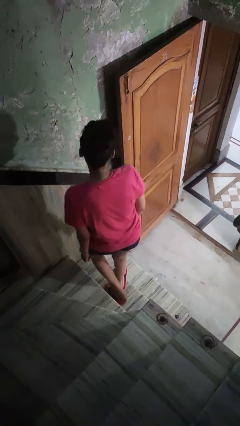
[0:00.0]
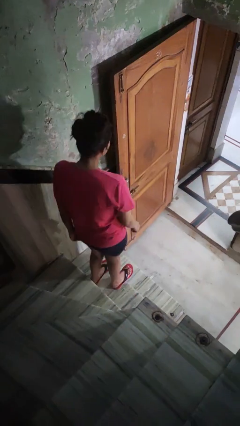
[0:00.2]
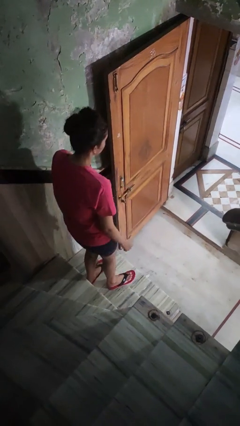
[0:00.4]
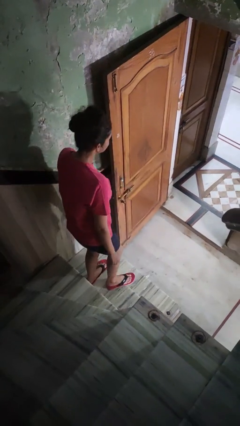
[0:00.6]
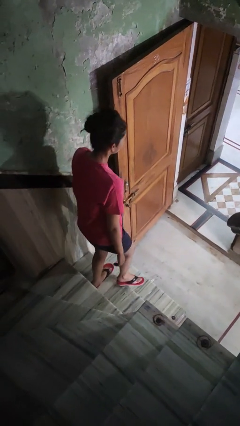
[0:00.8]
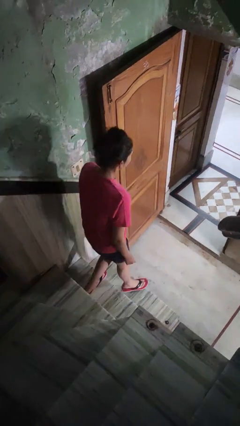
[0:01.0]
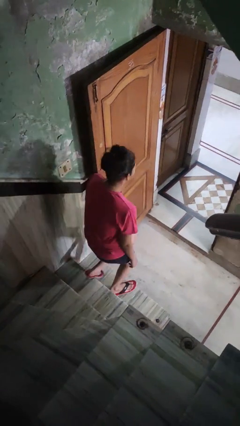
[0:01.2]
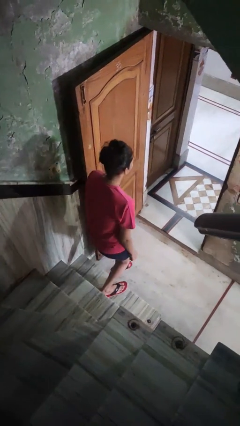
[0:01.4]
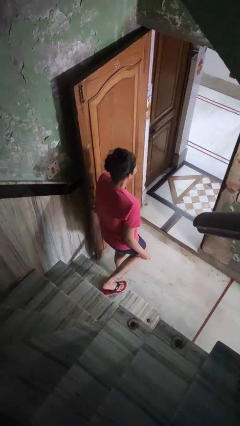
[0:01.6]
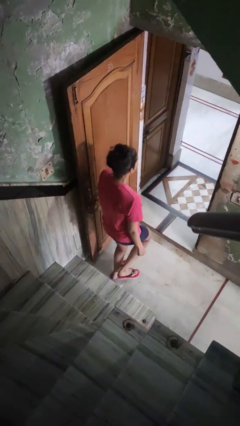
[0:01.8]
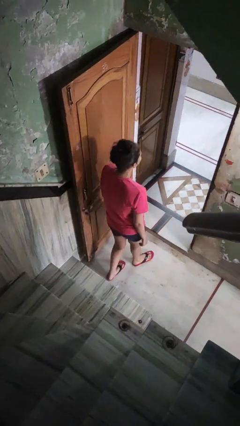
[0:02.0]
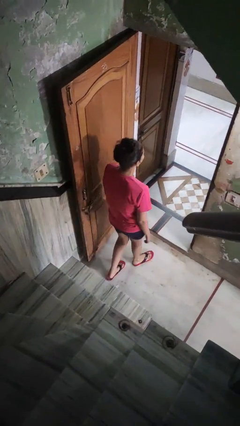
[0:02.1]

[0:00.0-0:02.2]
person climbs down stairs

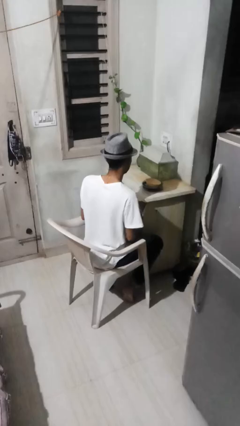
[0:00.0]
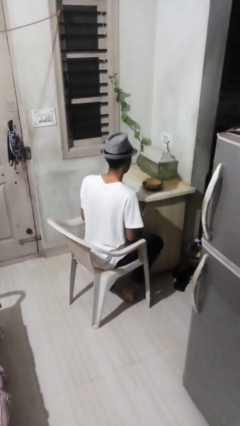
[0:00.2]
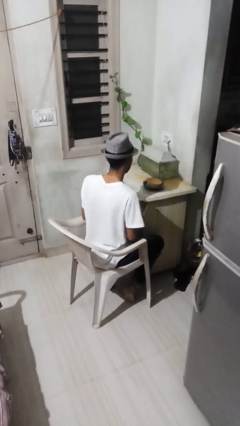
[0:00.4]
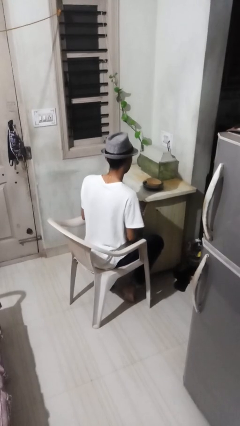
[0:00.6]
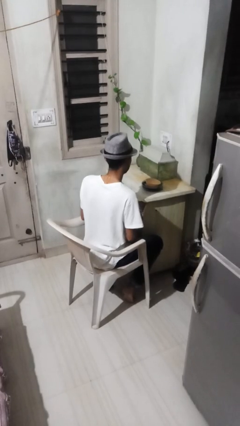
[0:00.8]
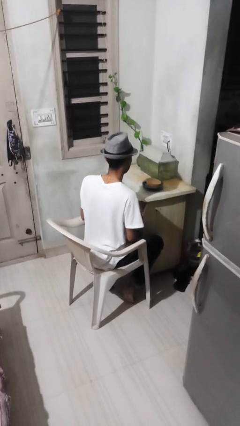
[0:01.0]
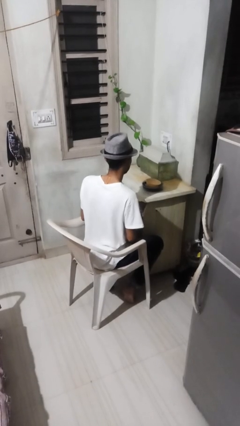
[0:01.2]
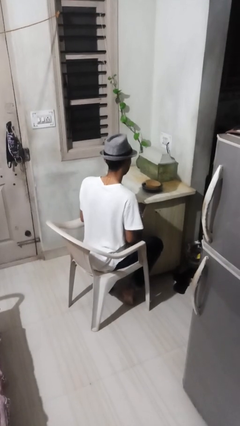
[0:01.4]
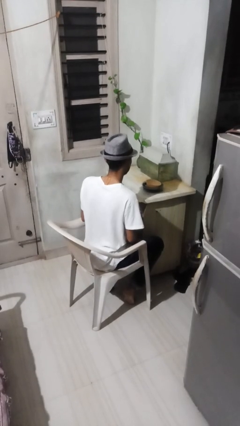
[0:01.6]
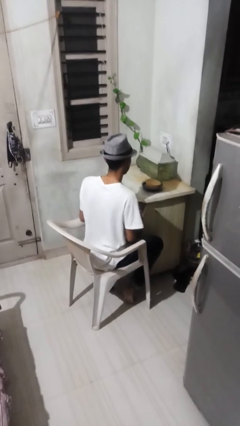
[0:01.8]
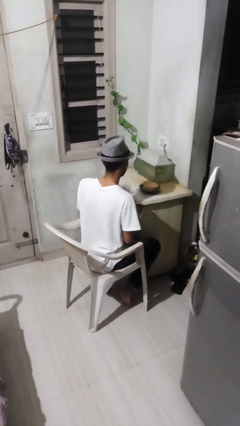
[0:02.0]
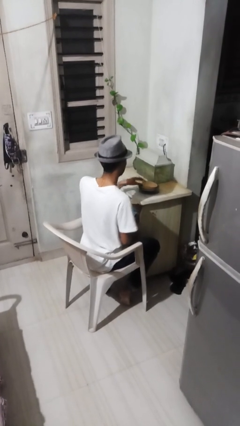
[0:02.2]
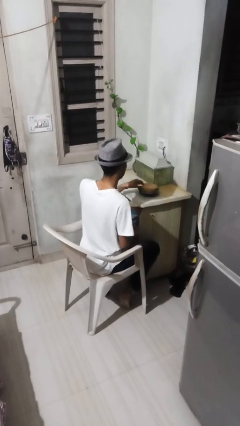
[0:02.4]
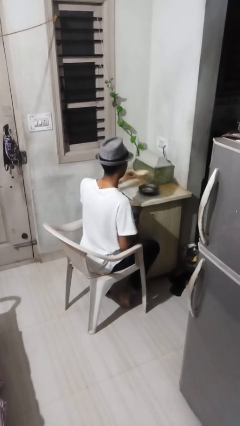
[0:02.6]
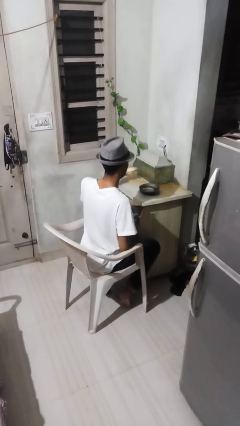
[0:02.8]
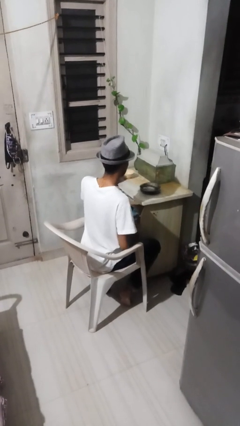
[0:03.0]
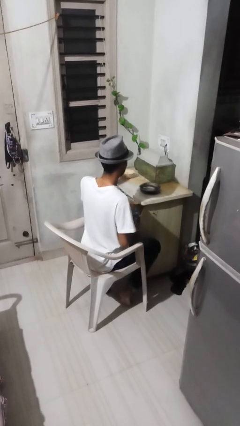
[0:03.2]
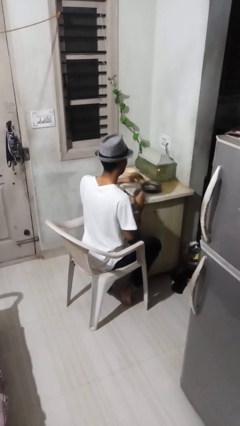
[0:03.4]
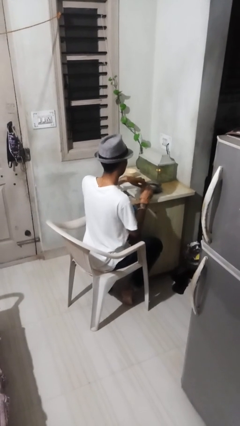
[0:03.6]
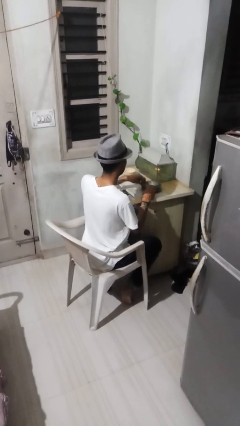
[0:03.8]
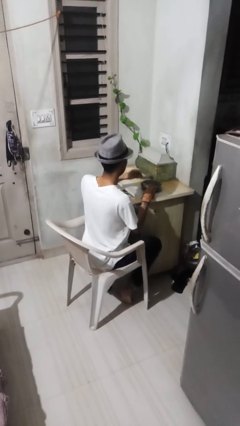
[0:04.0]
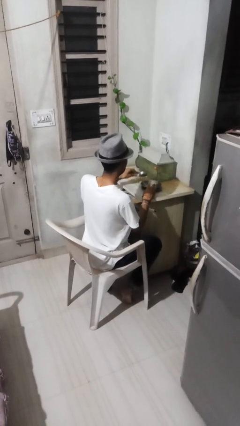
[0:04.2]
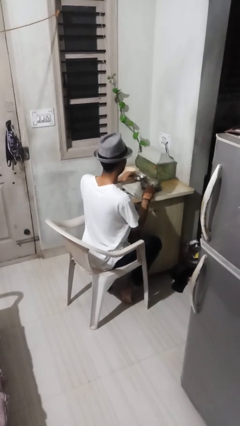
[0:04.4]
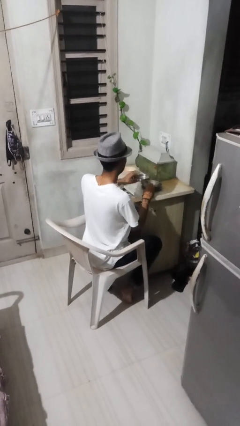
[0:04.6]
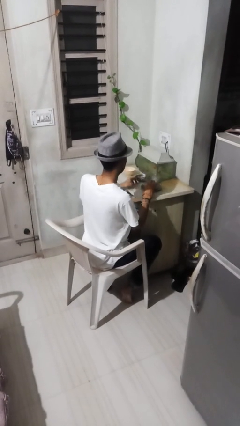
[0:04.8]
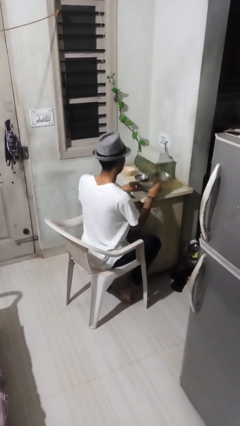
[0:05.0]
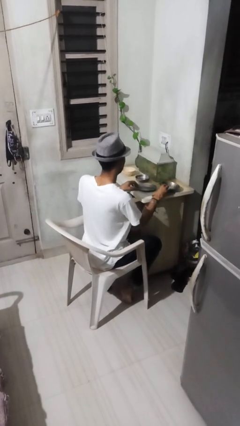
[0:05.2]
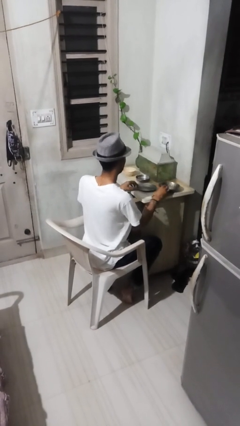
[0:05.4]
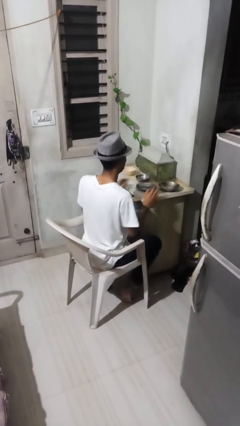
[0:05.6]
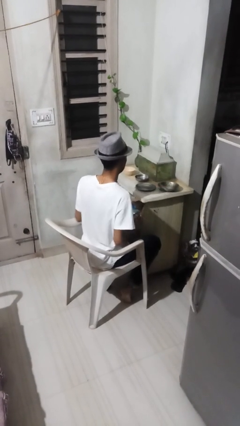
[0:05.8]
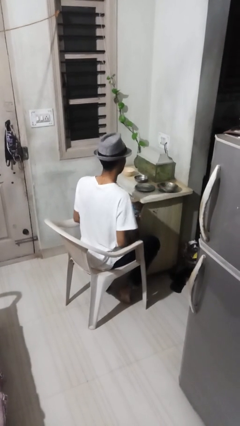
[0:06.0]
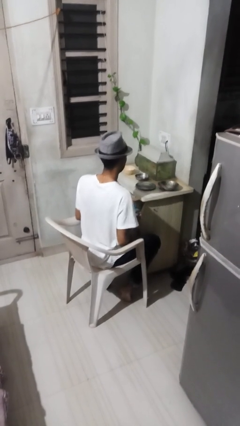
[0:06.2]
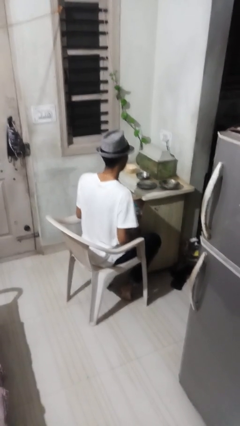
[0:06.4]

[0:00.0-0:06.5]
person sets table

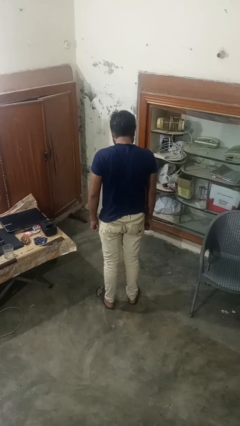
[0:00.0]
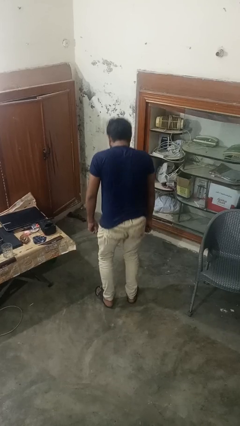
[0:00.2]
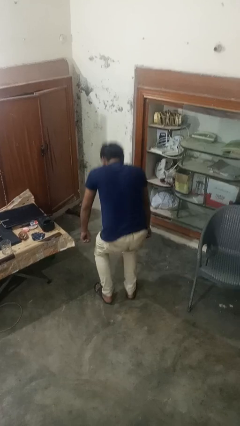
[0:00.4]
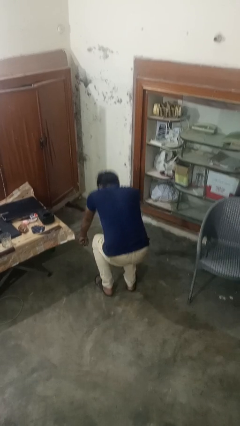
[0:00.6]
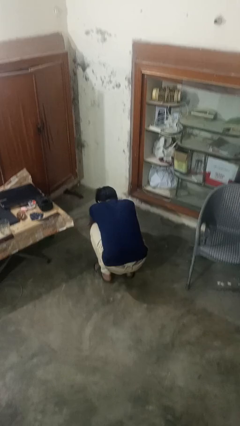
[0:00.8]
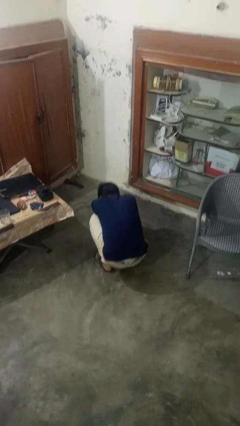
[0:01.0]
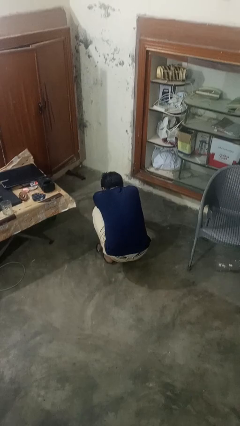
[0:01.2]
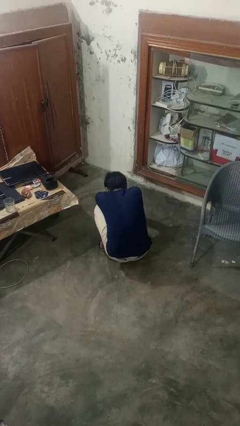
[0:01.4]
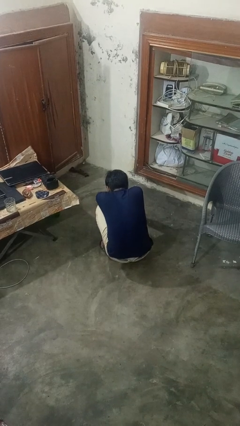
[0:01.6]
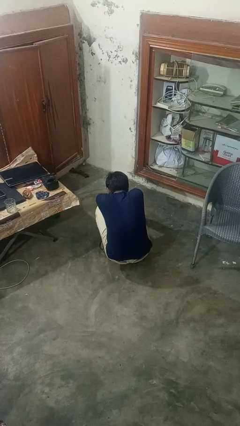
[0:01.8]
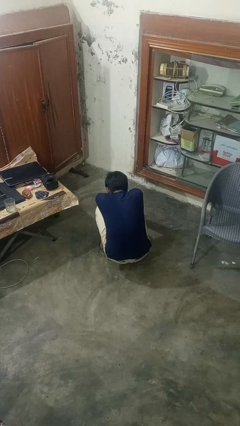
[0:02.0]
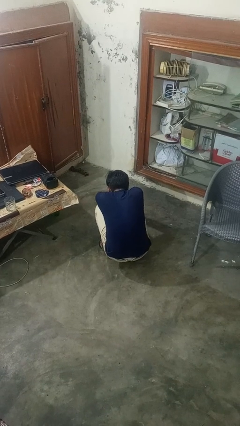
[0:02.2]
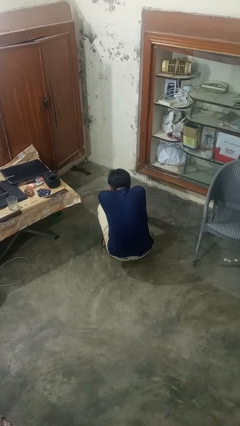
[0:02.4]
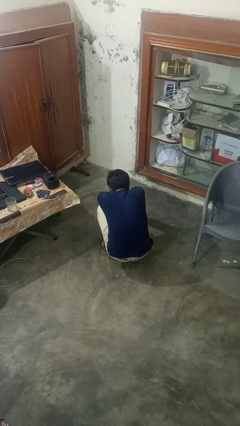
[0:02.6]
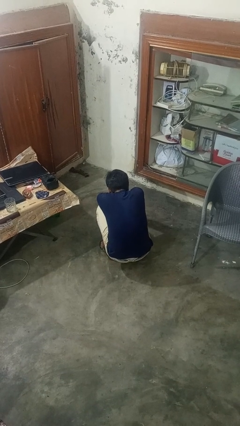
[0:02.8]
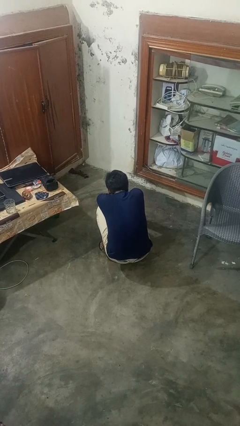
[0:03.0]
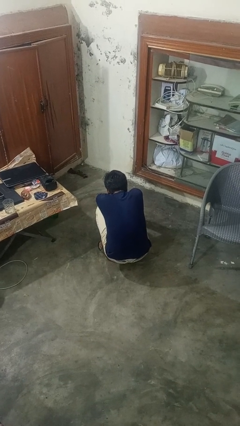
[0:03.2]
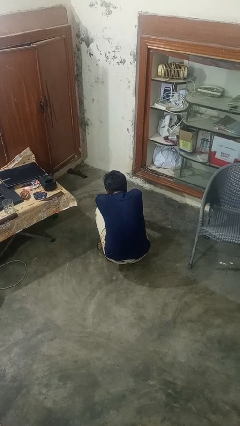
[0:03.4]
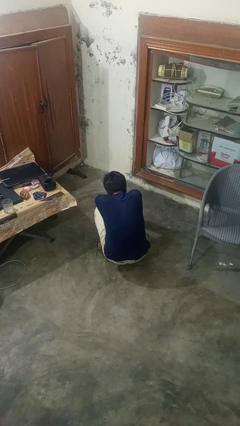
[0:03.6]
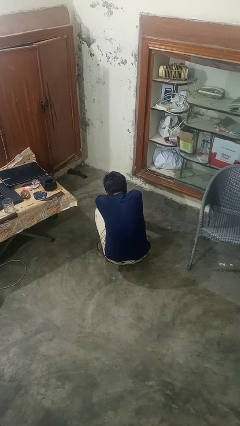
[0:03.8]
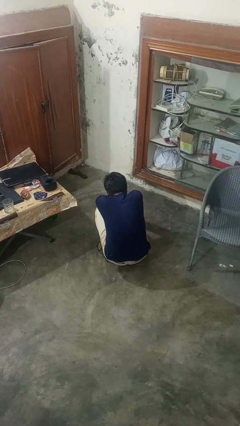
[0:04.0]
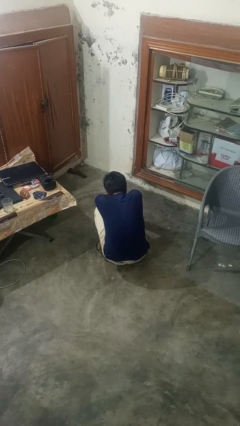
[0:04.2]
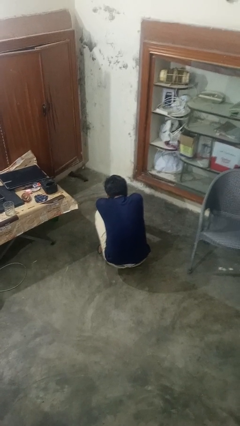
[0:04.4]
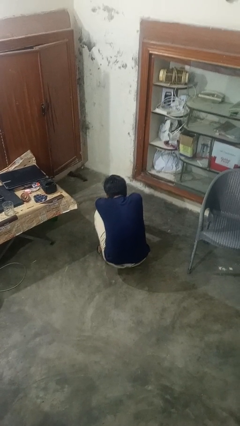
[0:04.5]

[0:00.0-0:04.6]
person squats

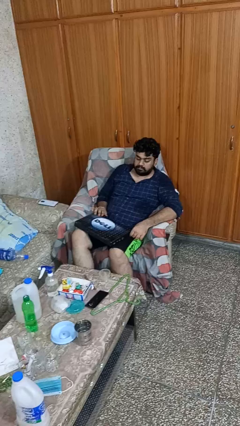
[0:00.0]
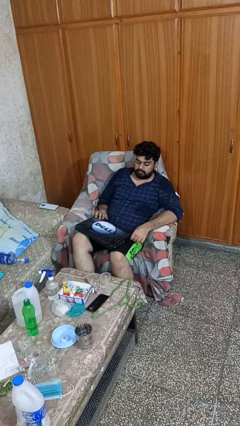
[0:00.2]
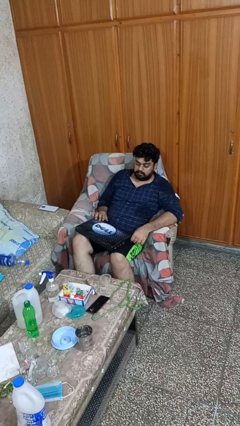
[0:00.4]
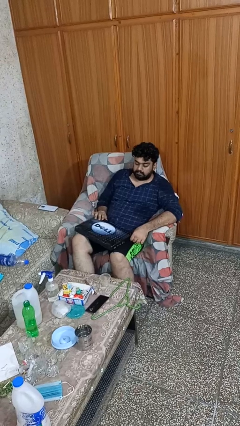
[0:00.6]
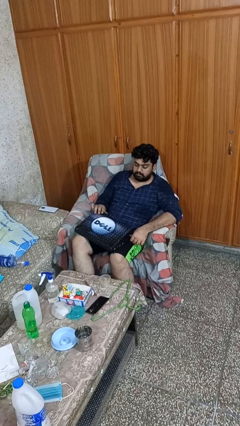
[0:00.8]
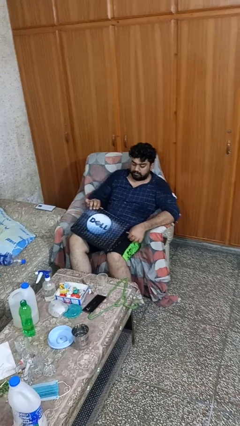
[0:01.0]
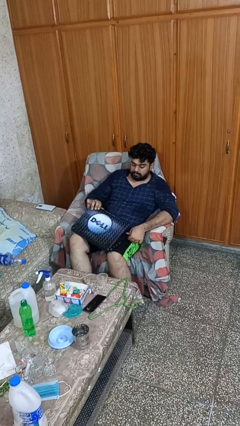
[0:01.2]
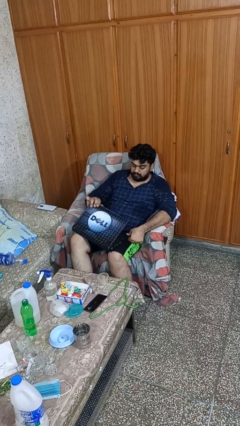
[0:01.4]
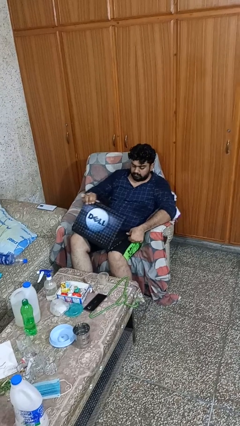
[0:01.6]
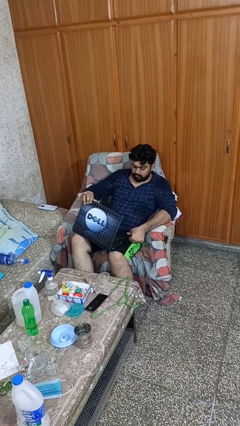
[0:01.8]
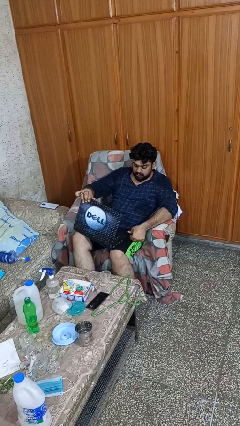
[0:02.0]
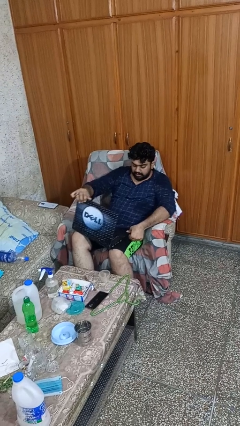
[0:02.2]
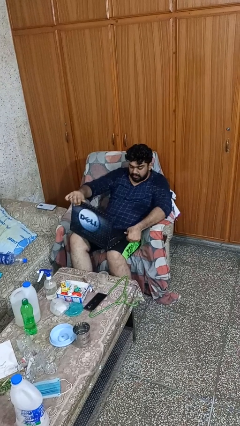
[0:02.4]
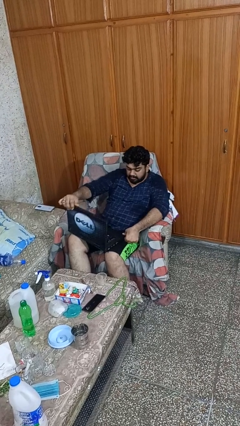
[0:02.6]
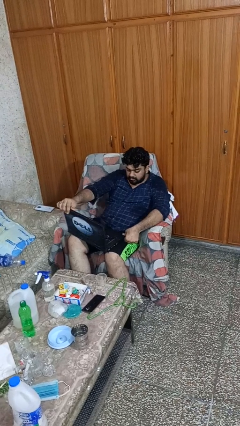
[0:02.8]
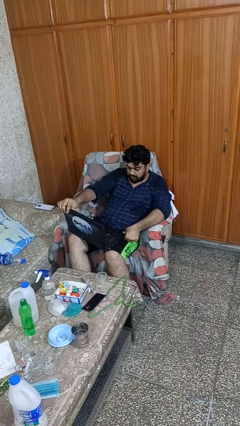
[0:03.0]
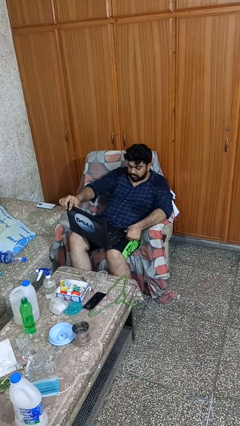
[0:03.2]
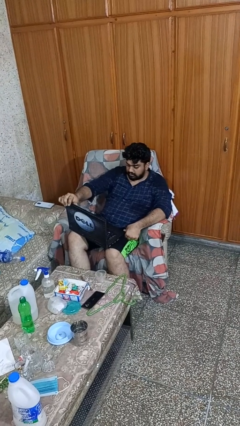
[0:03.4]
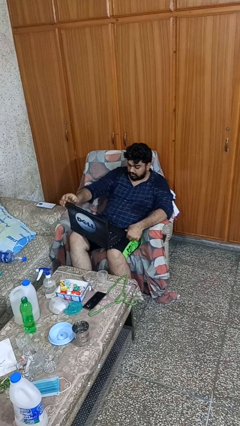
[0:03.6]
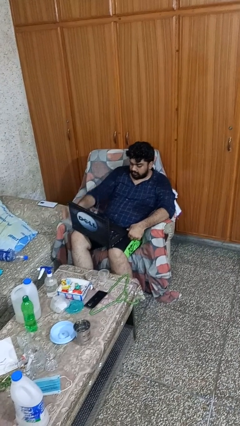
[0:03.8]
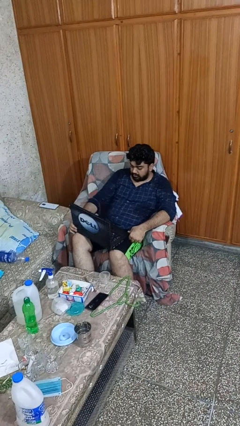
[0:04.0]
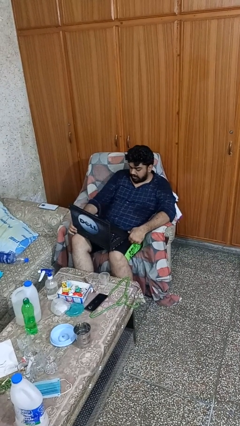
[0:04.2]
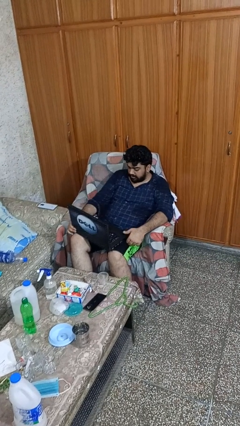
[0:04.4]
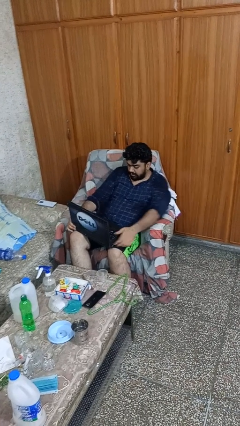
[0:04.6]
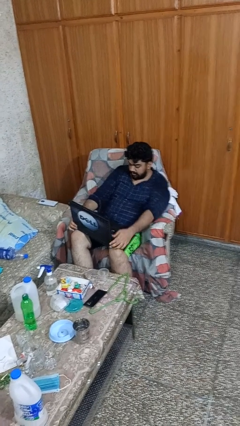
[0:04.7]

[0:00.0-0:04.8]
person opens laptop
